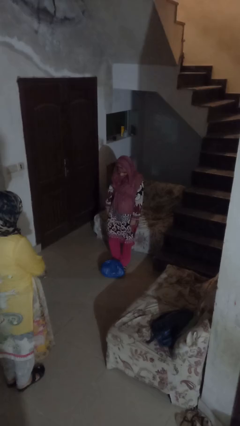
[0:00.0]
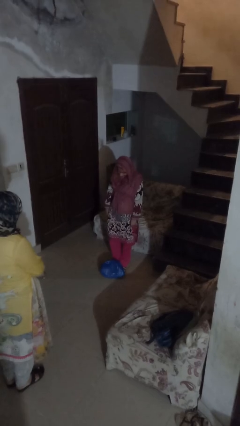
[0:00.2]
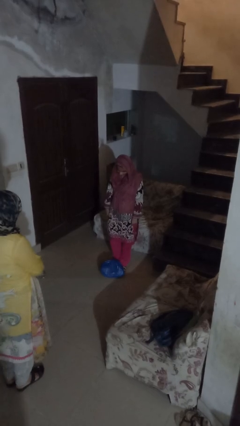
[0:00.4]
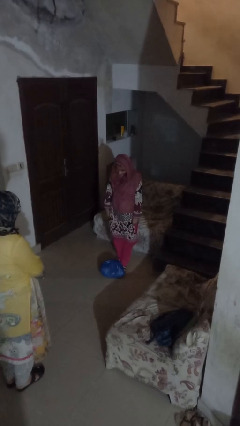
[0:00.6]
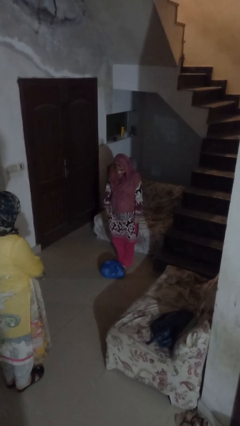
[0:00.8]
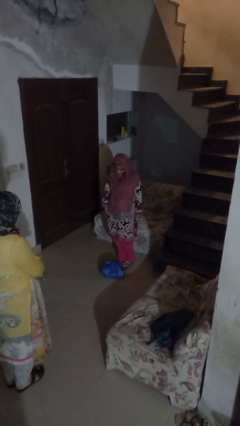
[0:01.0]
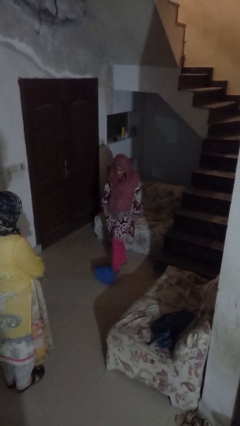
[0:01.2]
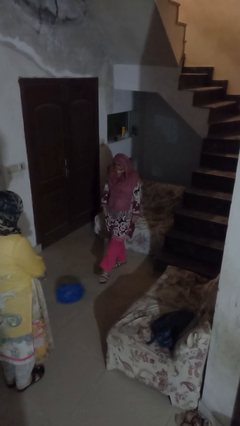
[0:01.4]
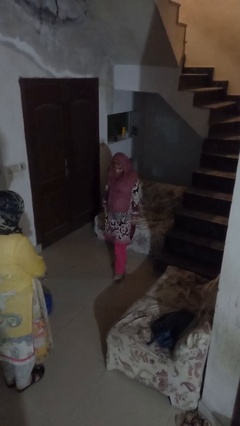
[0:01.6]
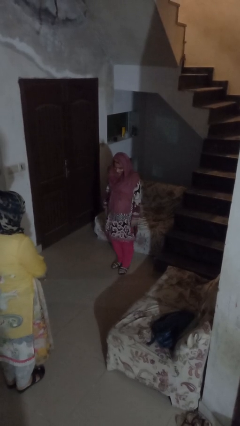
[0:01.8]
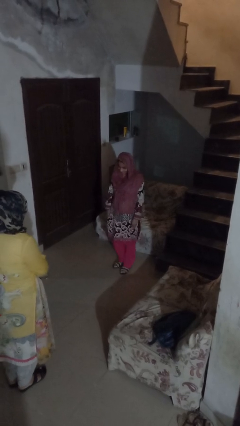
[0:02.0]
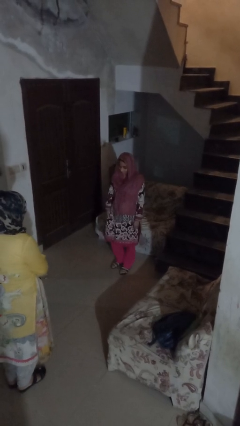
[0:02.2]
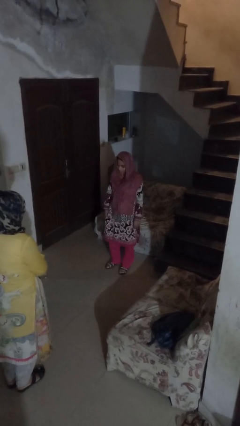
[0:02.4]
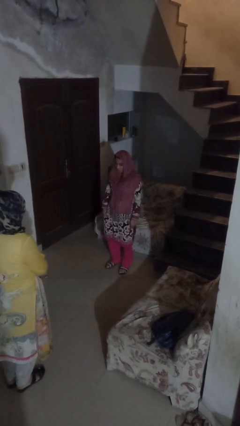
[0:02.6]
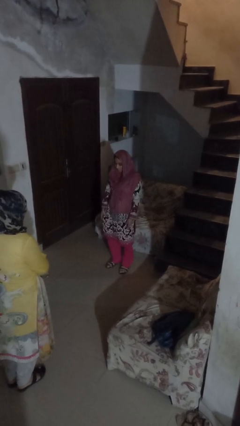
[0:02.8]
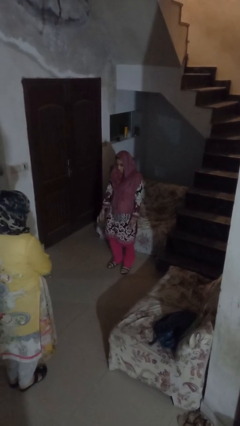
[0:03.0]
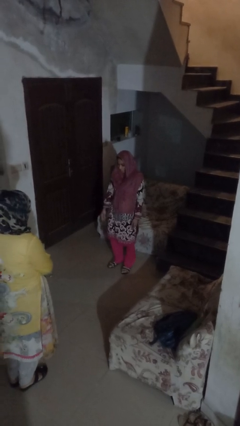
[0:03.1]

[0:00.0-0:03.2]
person kicks object to person

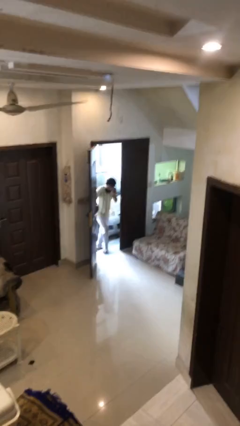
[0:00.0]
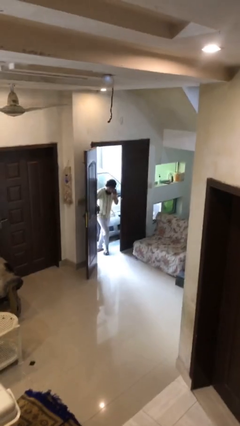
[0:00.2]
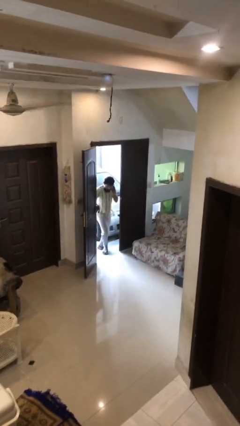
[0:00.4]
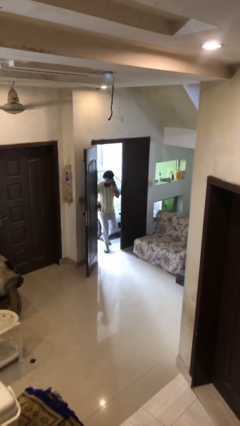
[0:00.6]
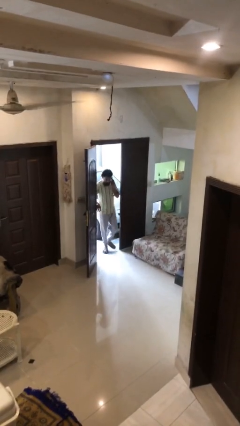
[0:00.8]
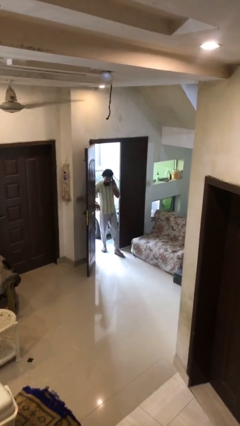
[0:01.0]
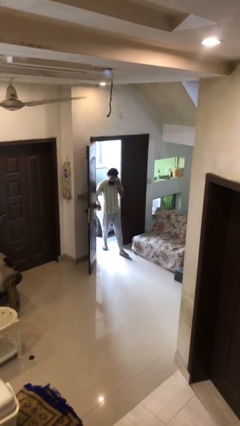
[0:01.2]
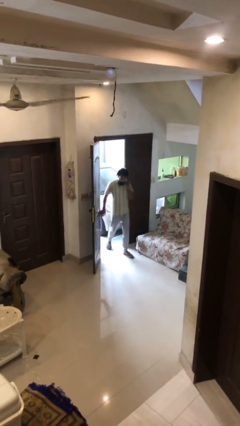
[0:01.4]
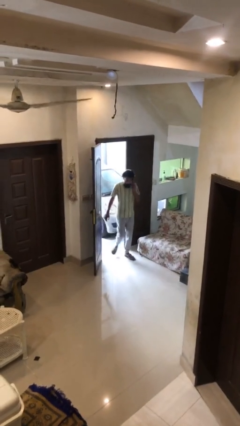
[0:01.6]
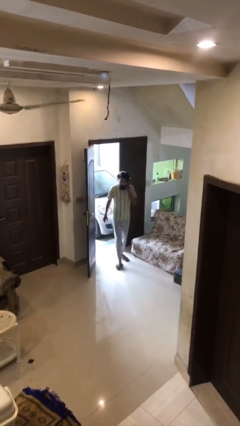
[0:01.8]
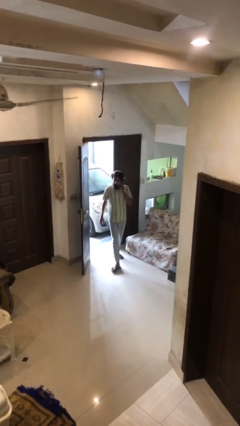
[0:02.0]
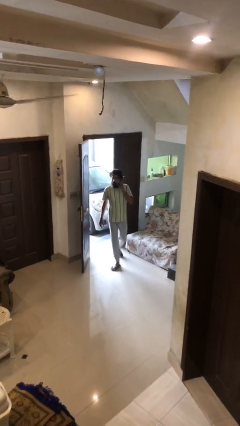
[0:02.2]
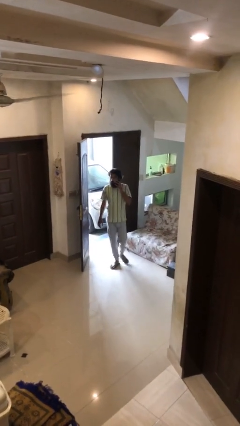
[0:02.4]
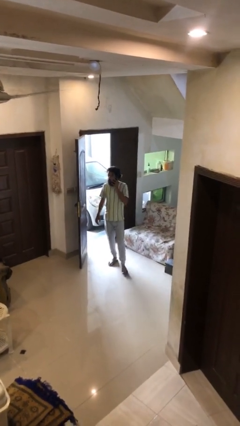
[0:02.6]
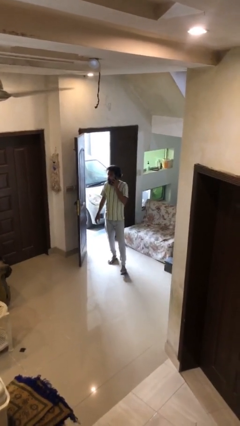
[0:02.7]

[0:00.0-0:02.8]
person enters scene through structure

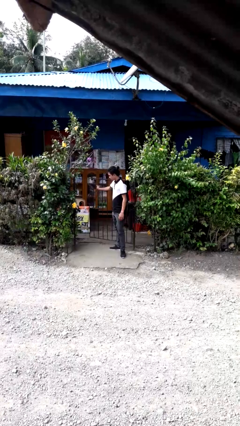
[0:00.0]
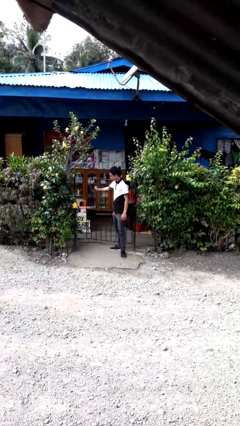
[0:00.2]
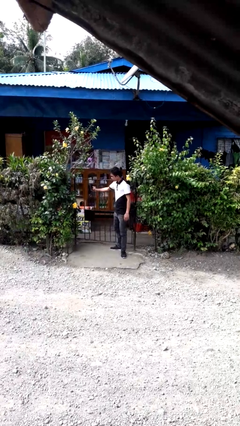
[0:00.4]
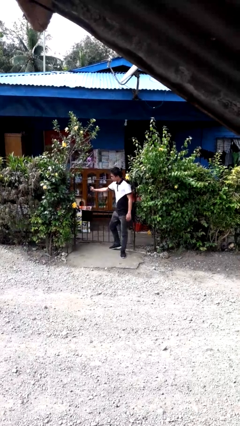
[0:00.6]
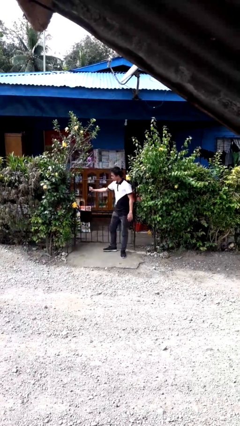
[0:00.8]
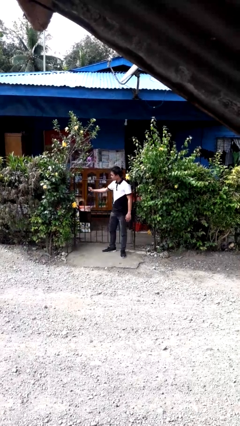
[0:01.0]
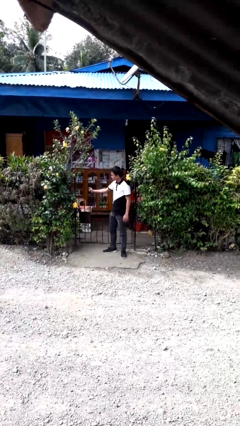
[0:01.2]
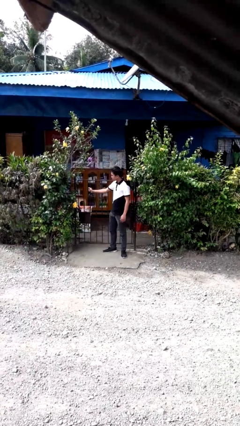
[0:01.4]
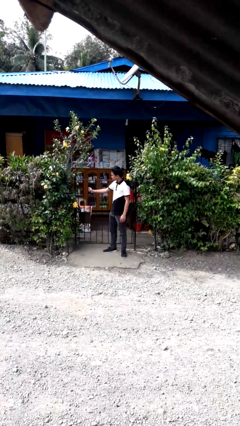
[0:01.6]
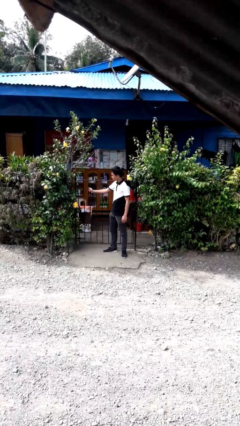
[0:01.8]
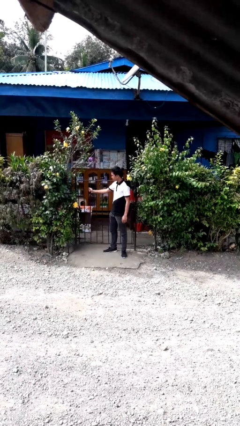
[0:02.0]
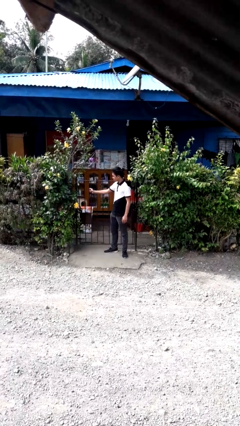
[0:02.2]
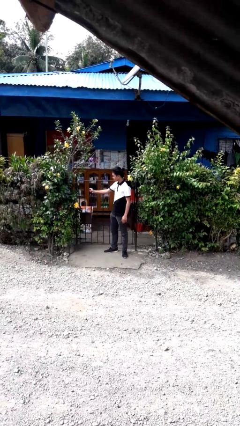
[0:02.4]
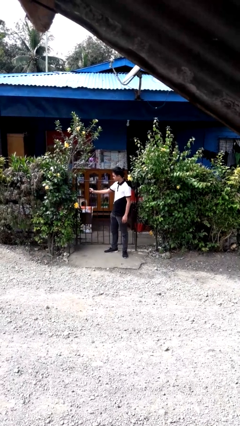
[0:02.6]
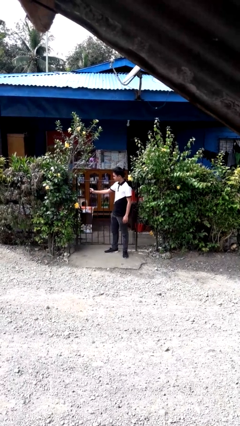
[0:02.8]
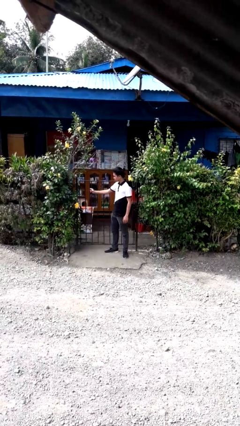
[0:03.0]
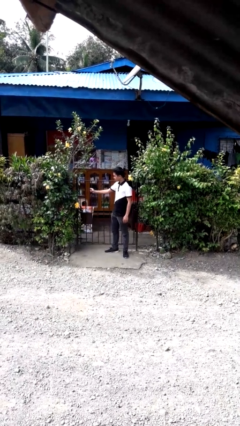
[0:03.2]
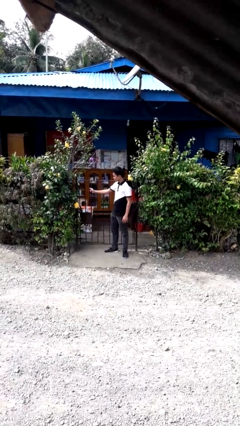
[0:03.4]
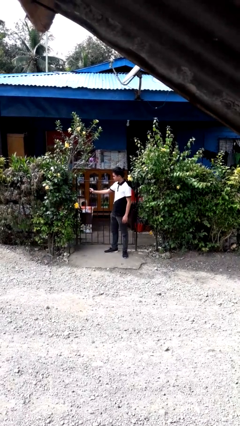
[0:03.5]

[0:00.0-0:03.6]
person closes gate

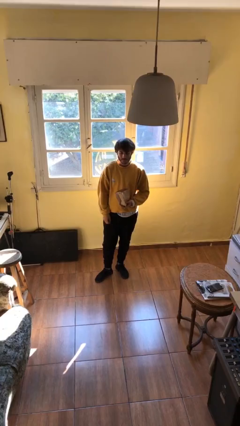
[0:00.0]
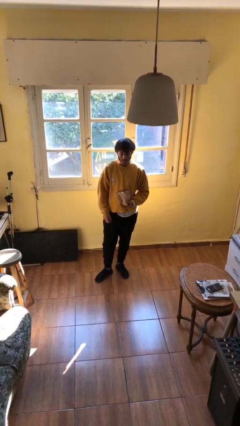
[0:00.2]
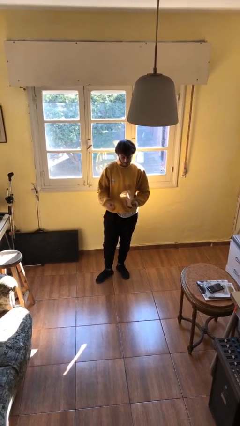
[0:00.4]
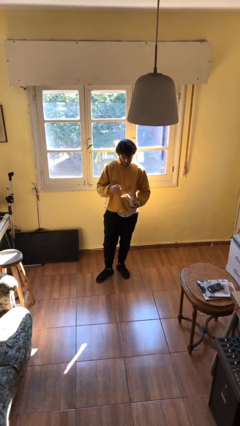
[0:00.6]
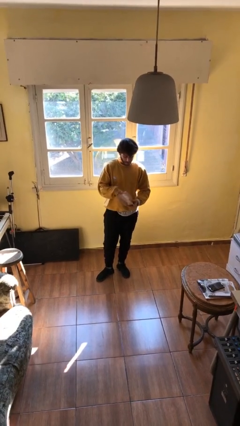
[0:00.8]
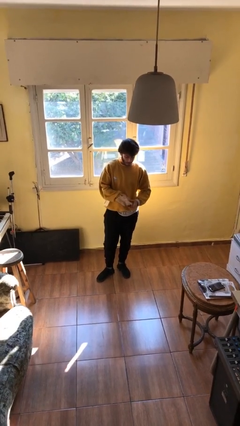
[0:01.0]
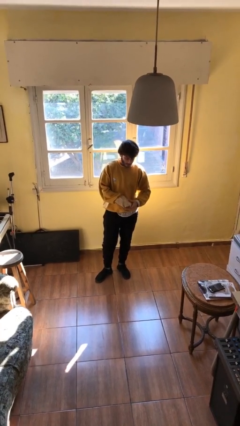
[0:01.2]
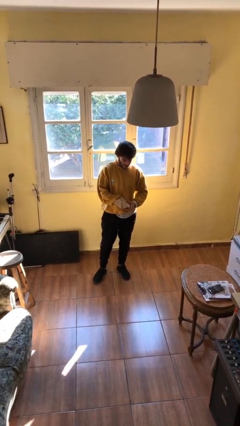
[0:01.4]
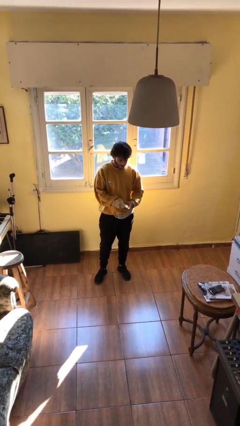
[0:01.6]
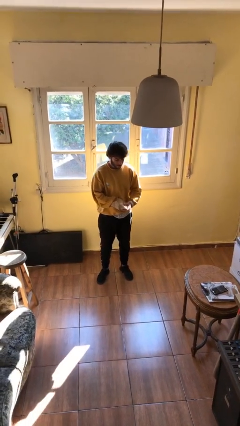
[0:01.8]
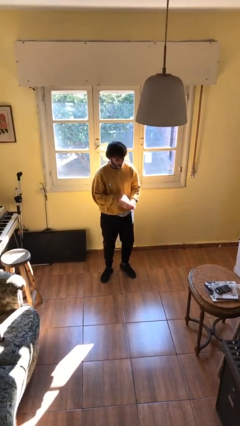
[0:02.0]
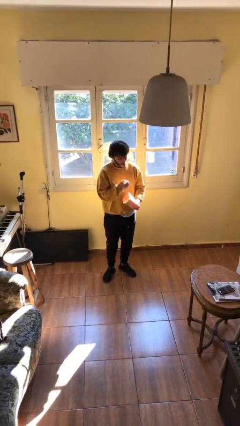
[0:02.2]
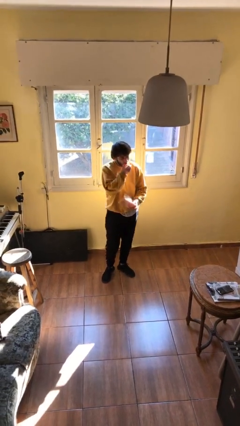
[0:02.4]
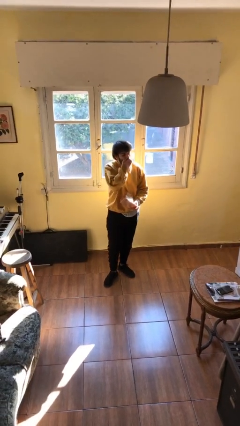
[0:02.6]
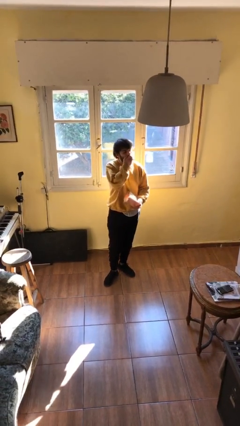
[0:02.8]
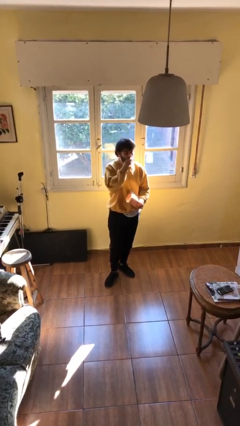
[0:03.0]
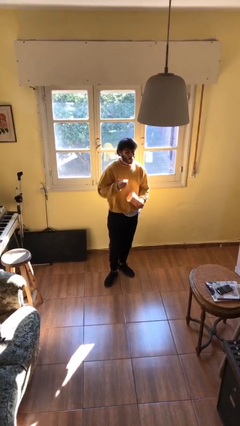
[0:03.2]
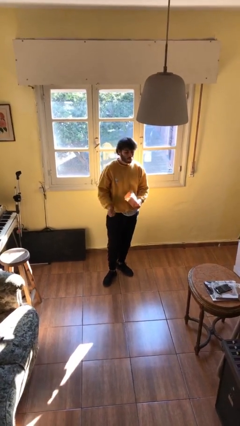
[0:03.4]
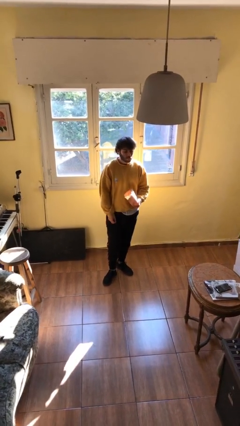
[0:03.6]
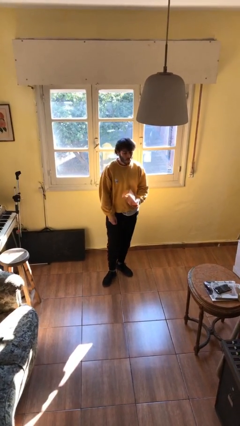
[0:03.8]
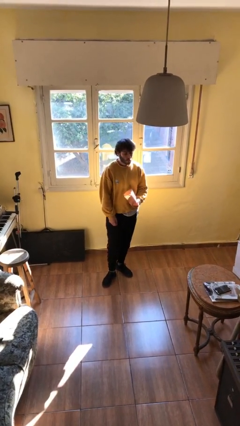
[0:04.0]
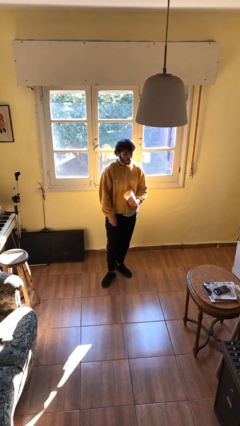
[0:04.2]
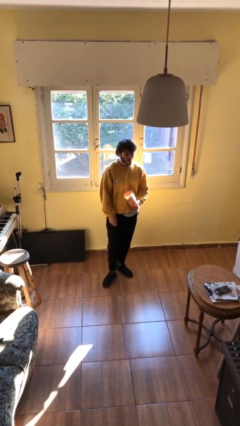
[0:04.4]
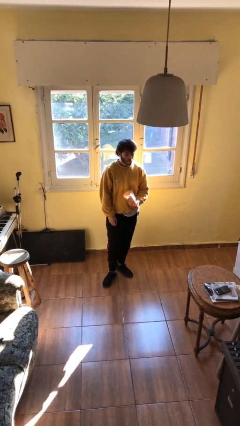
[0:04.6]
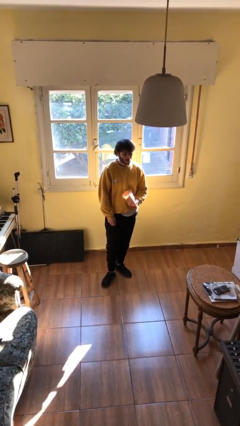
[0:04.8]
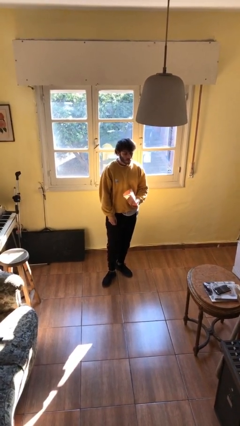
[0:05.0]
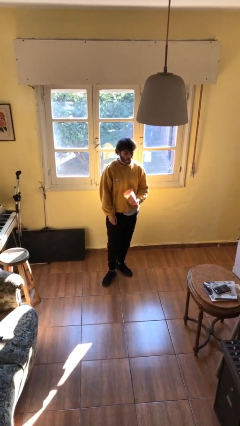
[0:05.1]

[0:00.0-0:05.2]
person eats snack from bag

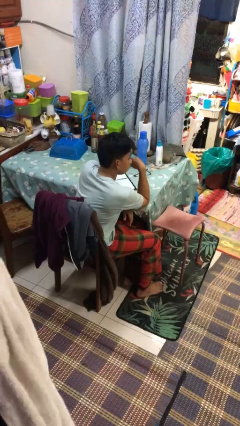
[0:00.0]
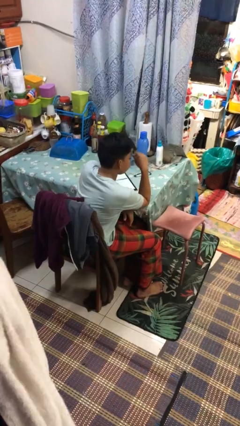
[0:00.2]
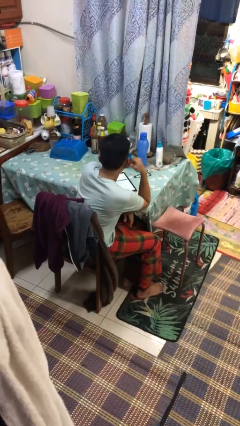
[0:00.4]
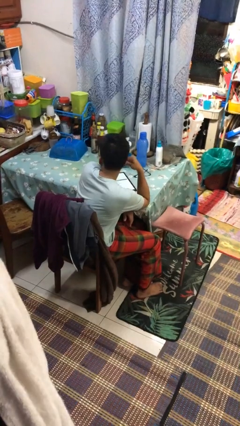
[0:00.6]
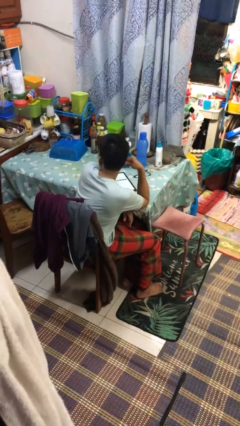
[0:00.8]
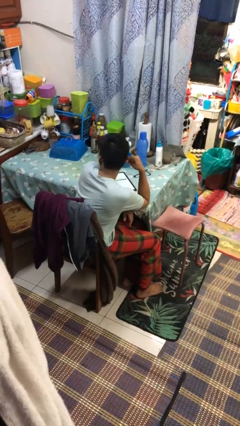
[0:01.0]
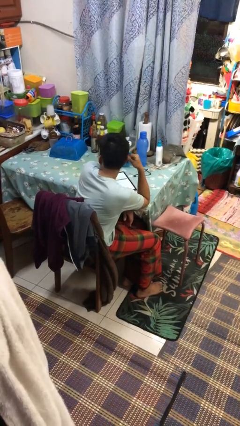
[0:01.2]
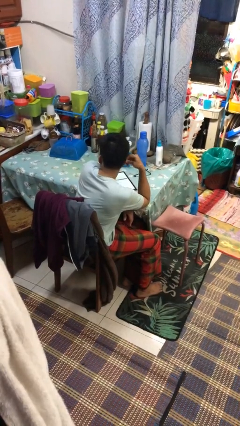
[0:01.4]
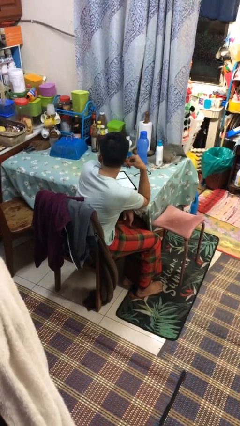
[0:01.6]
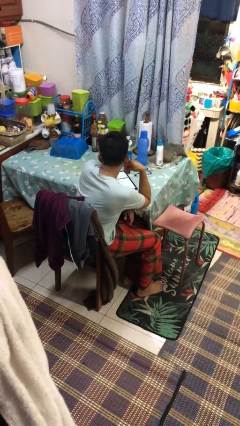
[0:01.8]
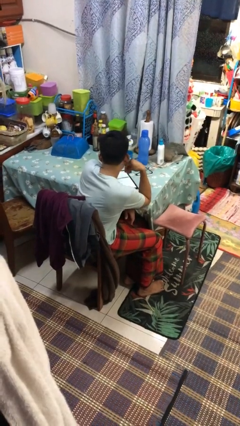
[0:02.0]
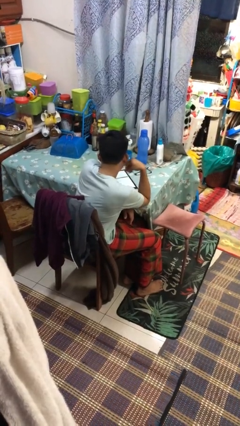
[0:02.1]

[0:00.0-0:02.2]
person touches earlobe

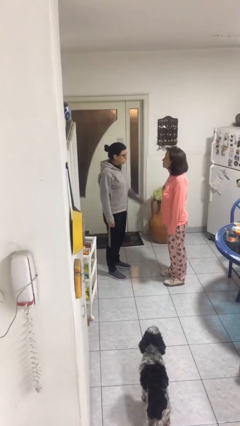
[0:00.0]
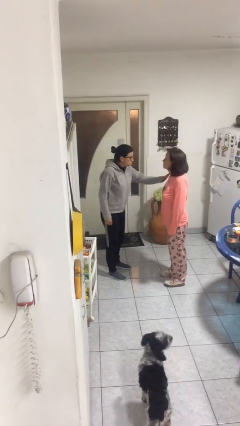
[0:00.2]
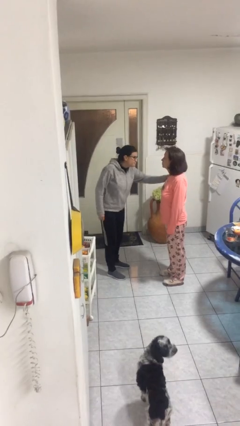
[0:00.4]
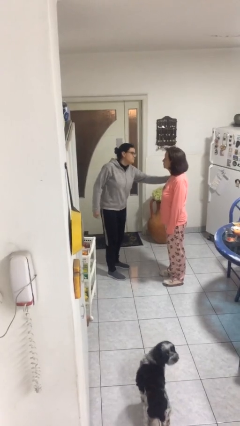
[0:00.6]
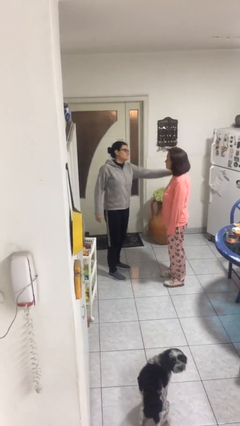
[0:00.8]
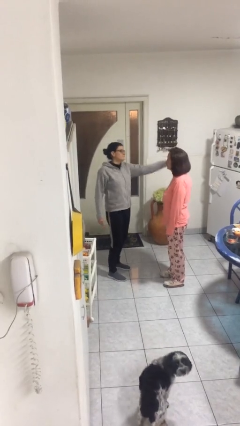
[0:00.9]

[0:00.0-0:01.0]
person shoves person
